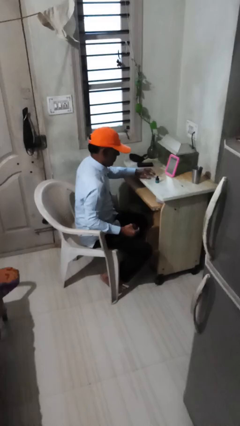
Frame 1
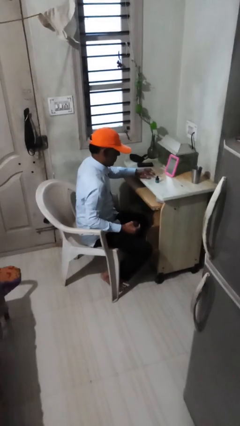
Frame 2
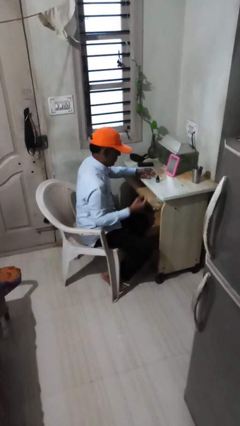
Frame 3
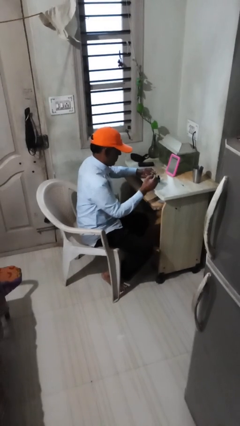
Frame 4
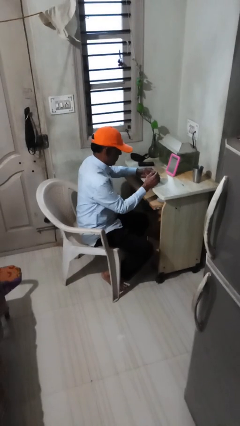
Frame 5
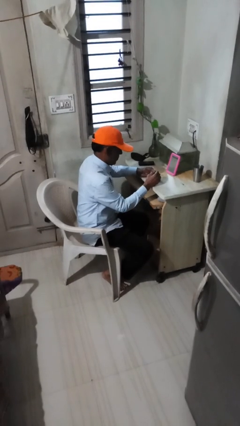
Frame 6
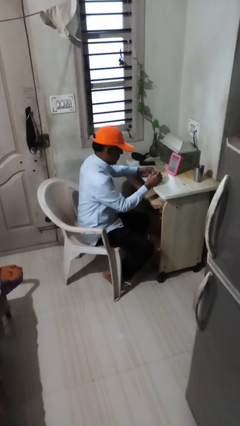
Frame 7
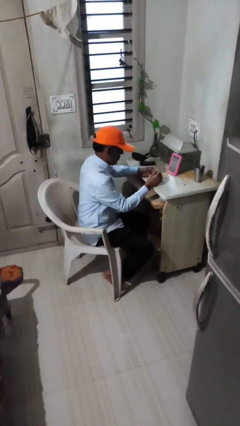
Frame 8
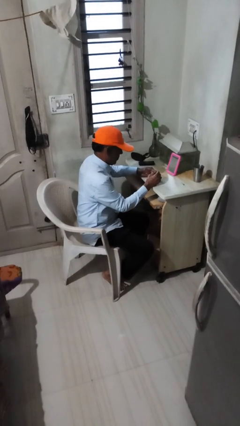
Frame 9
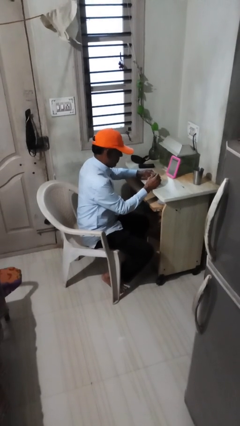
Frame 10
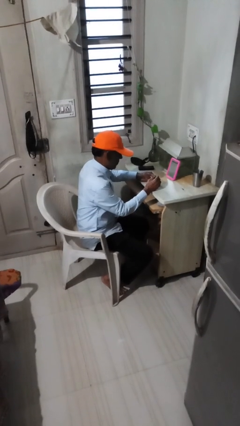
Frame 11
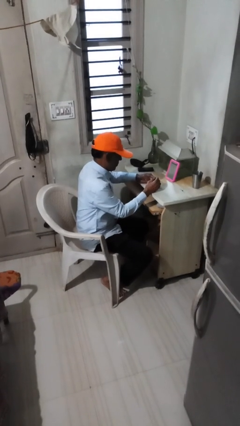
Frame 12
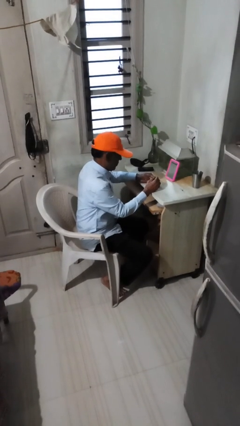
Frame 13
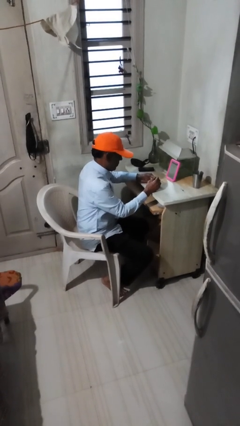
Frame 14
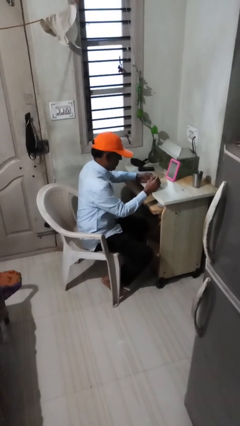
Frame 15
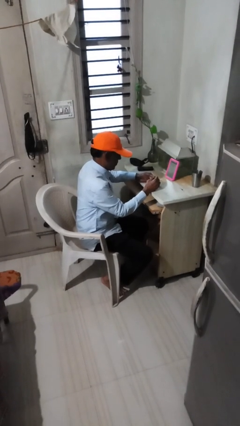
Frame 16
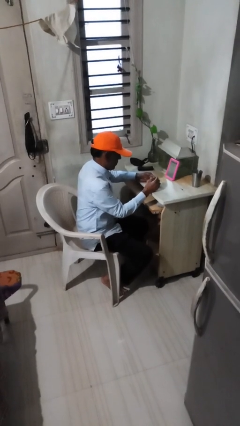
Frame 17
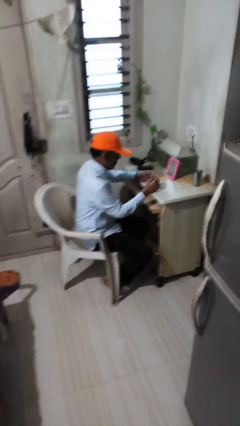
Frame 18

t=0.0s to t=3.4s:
person paints fingernails

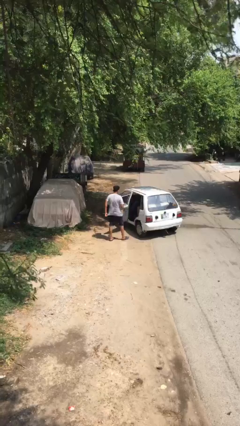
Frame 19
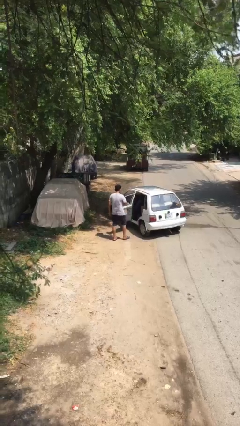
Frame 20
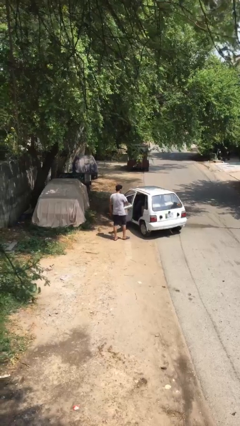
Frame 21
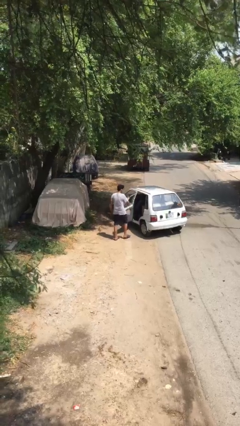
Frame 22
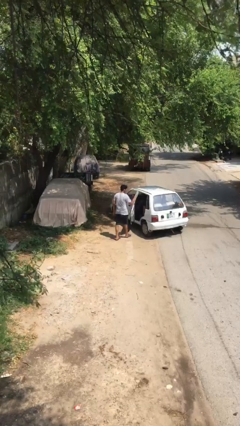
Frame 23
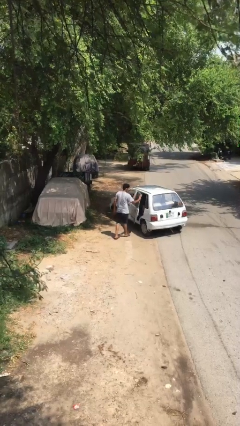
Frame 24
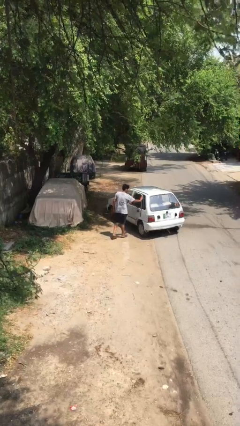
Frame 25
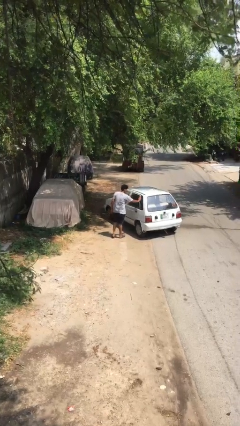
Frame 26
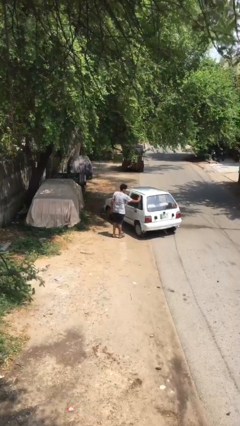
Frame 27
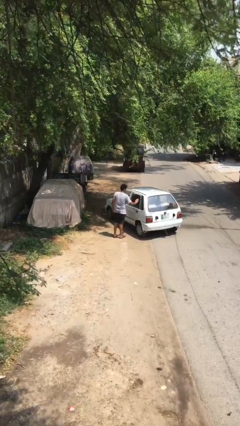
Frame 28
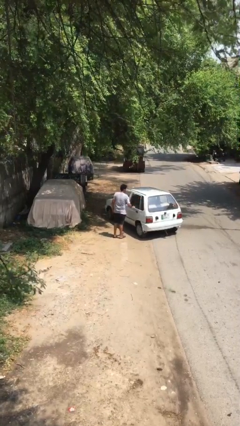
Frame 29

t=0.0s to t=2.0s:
person closes car door

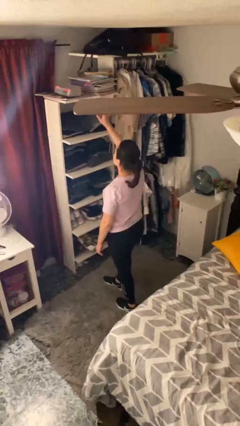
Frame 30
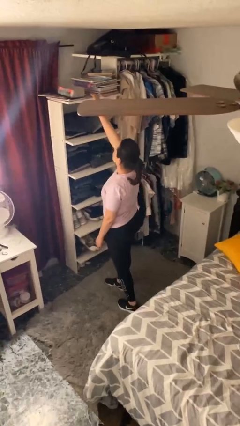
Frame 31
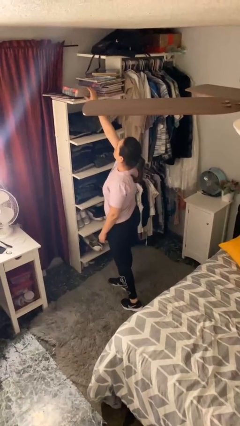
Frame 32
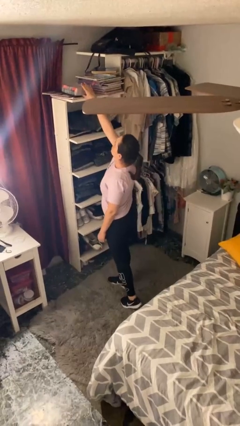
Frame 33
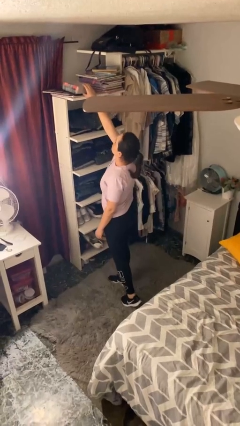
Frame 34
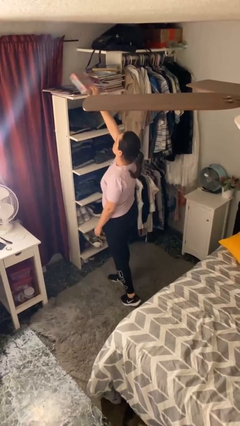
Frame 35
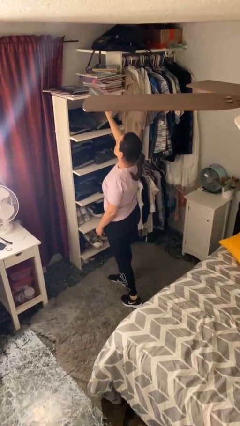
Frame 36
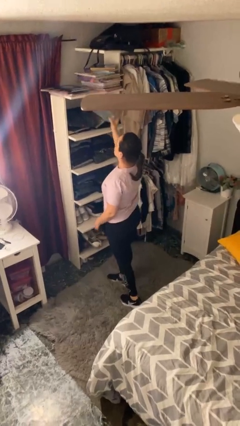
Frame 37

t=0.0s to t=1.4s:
person picks up object from shelf

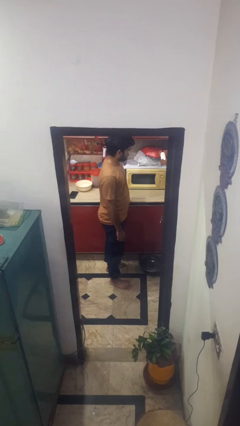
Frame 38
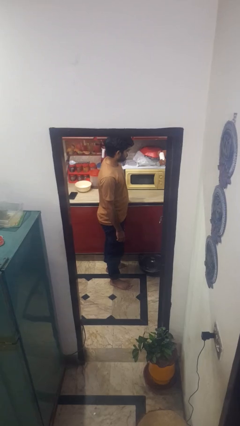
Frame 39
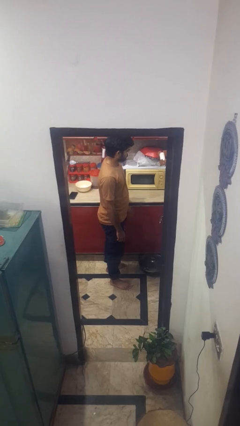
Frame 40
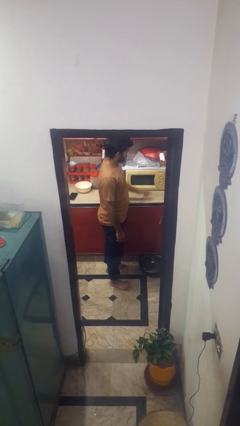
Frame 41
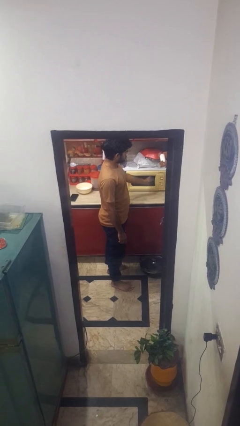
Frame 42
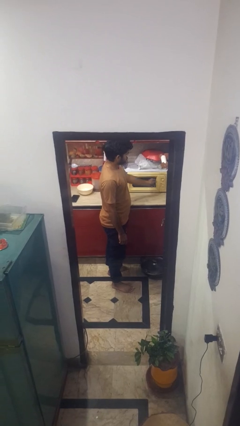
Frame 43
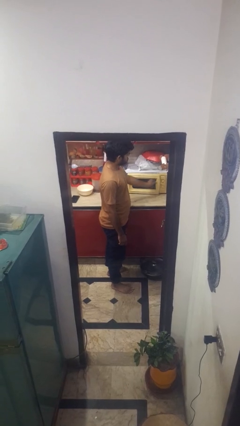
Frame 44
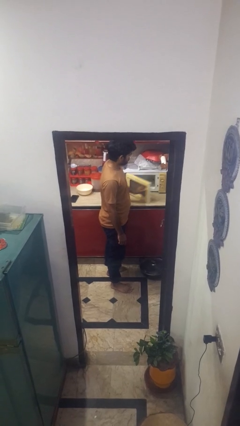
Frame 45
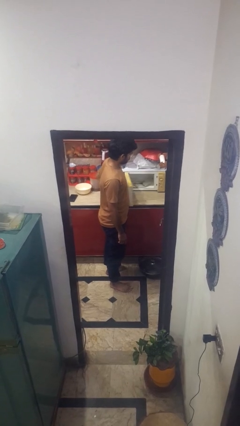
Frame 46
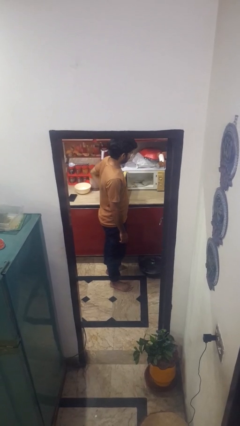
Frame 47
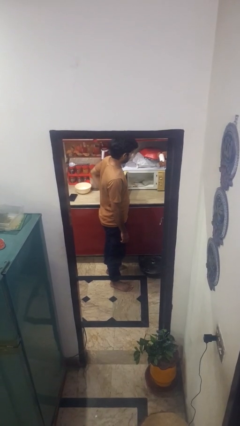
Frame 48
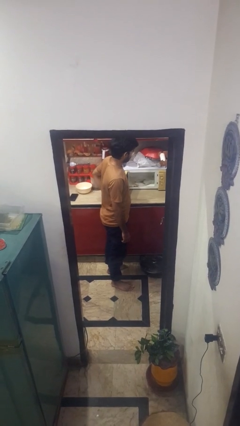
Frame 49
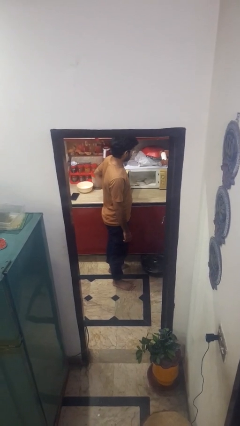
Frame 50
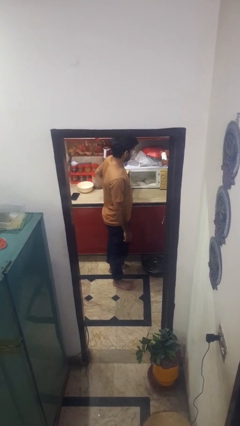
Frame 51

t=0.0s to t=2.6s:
person opens microwave

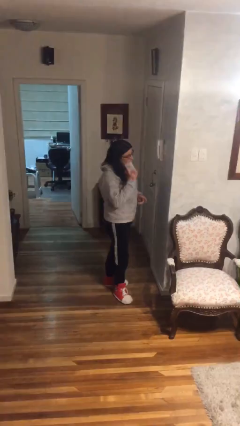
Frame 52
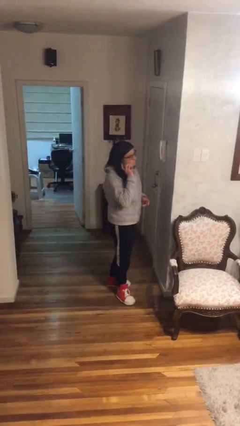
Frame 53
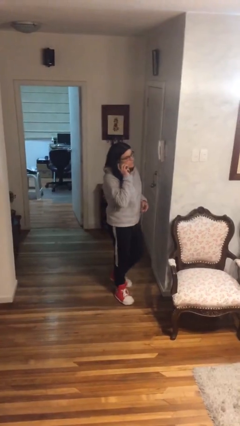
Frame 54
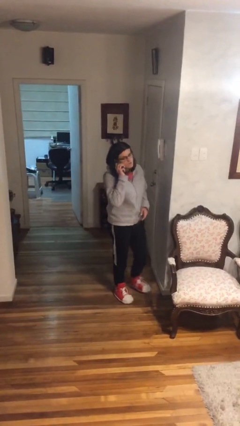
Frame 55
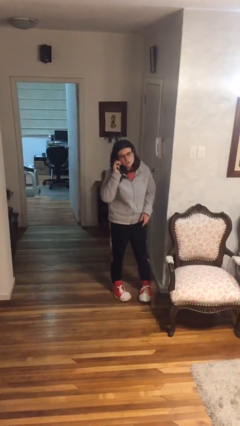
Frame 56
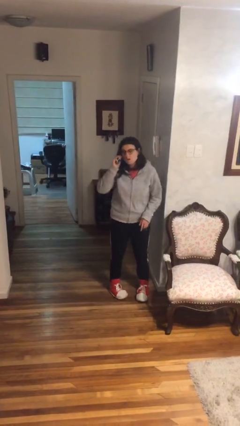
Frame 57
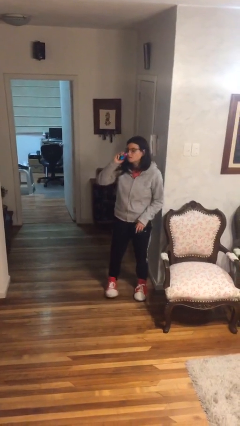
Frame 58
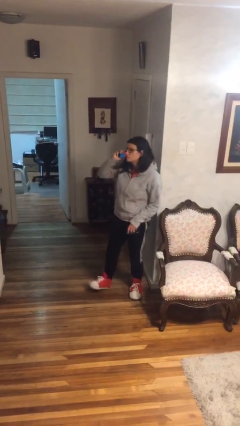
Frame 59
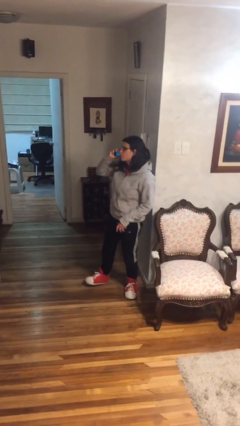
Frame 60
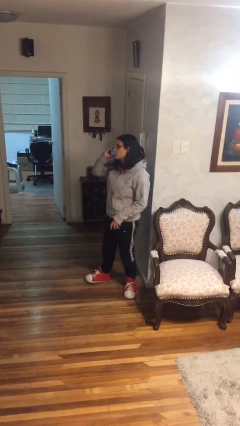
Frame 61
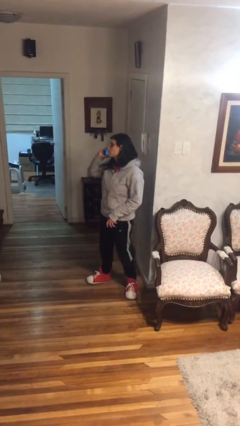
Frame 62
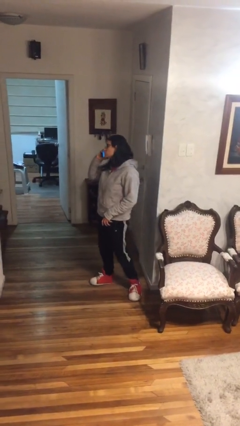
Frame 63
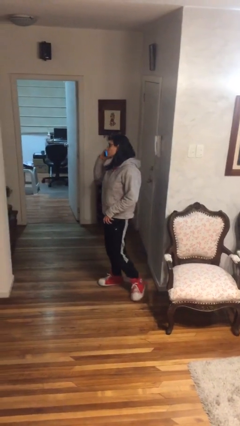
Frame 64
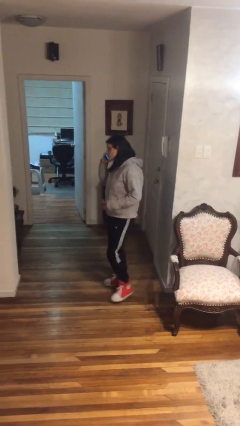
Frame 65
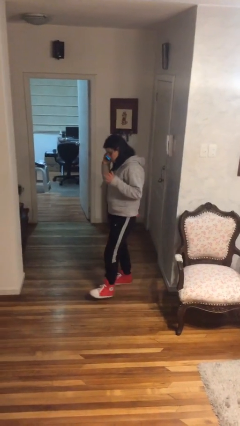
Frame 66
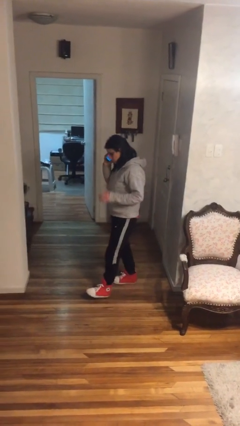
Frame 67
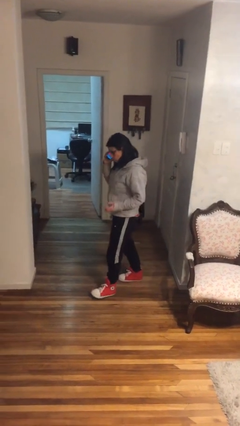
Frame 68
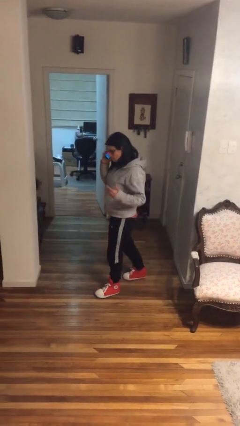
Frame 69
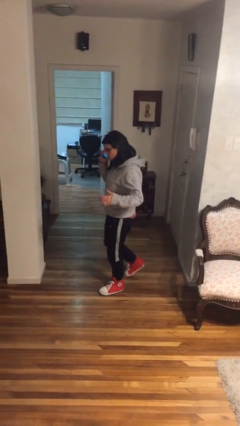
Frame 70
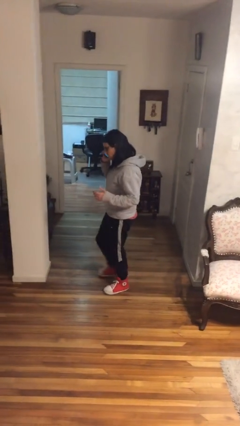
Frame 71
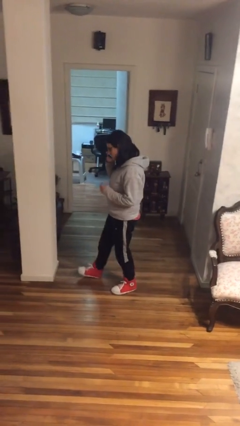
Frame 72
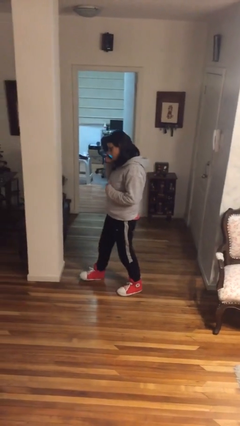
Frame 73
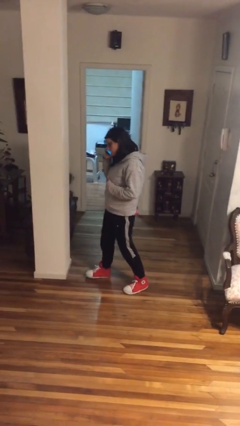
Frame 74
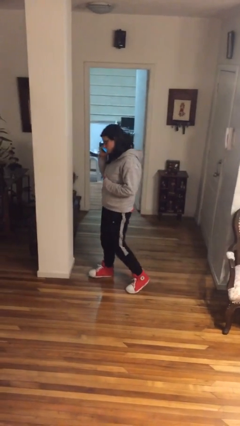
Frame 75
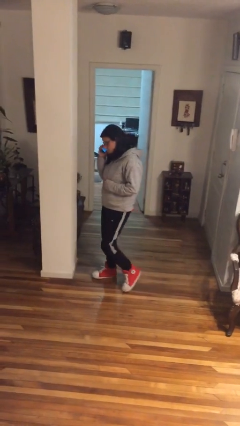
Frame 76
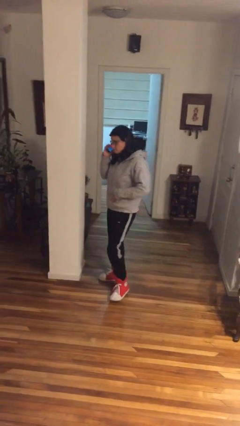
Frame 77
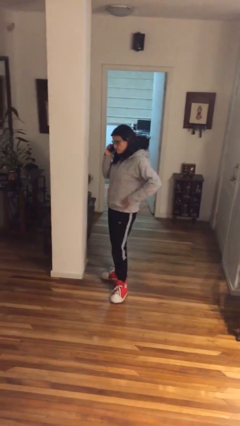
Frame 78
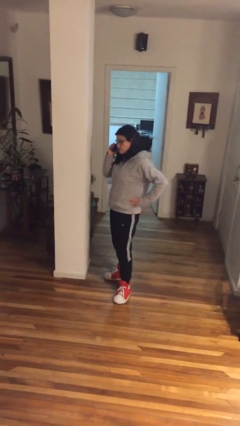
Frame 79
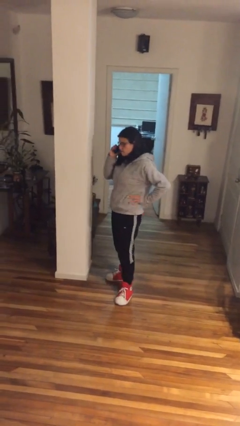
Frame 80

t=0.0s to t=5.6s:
person talks on phone

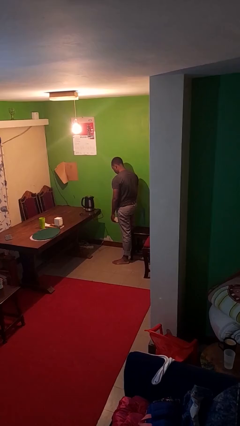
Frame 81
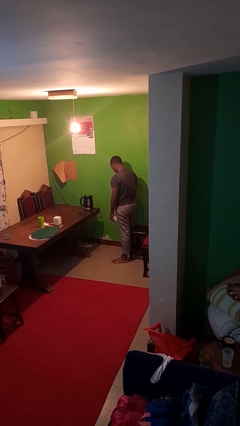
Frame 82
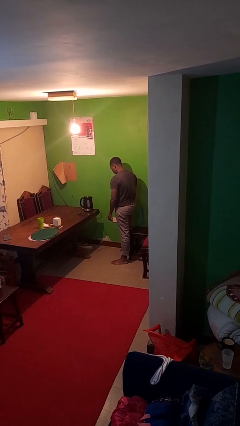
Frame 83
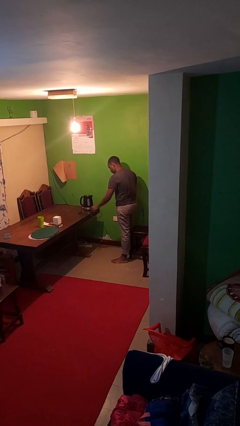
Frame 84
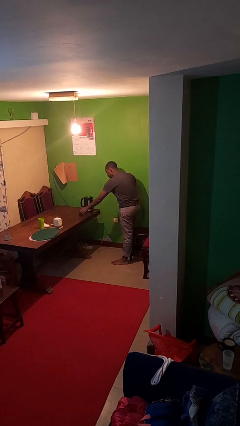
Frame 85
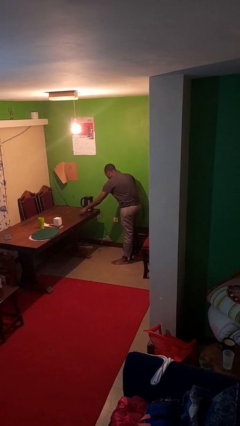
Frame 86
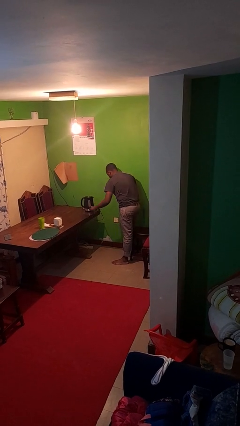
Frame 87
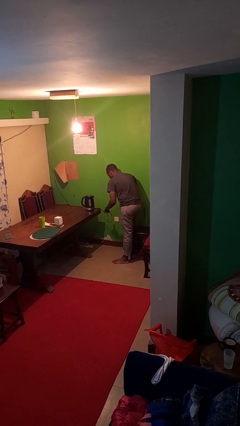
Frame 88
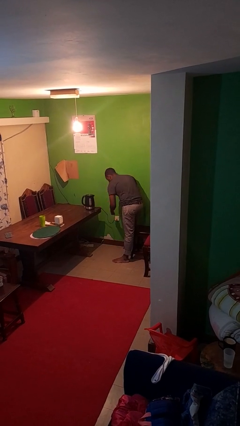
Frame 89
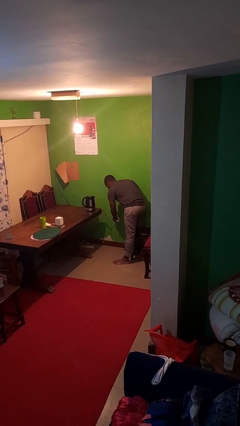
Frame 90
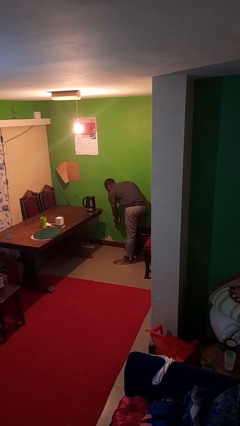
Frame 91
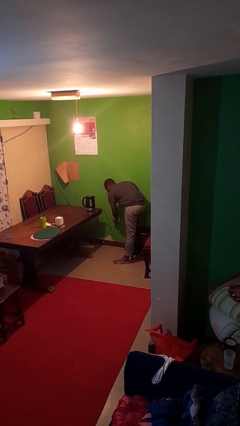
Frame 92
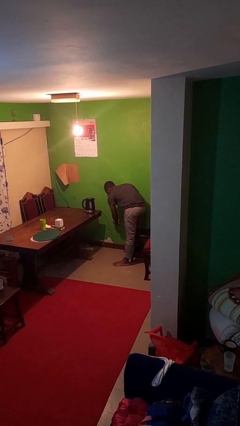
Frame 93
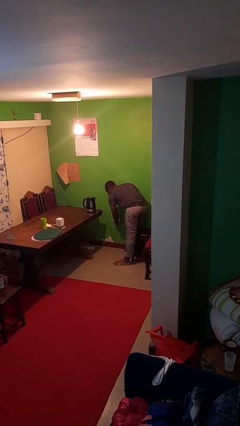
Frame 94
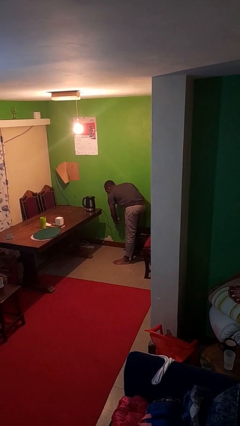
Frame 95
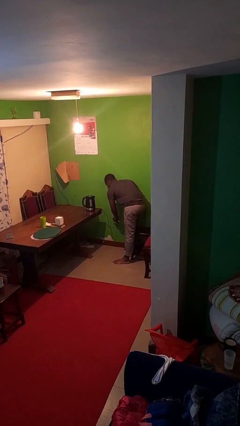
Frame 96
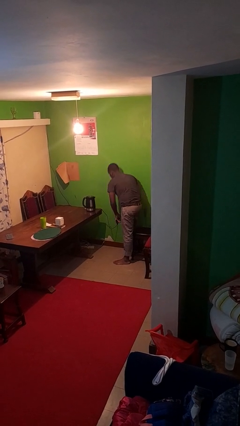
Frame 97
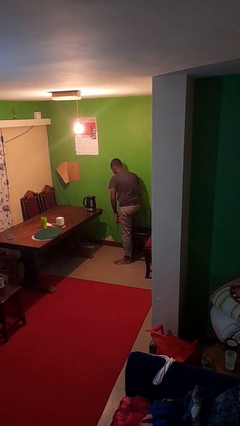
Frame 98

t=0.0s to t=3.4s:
person plugs into electrical socket
